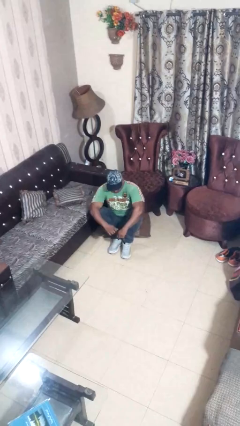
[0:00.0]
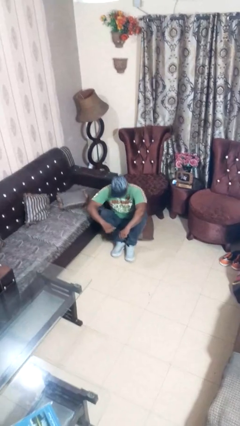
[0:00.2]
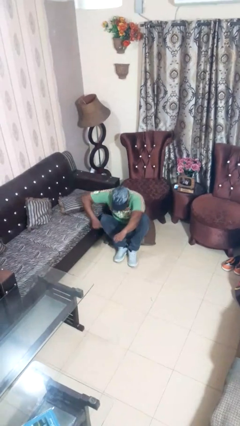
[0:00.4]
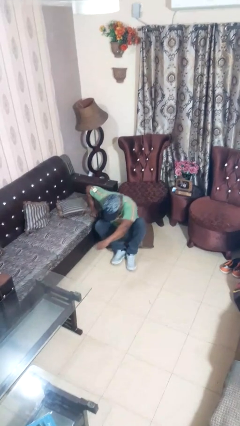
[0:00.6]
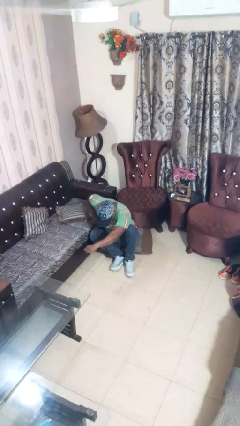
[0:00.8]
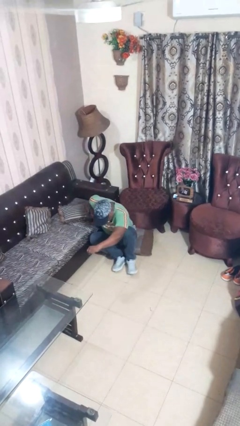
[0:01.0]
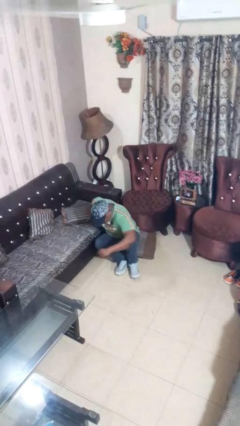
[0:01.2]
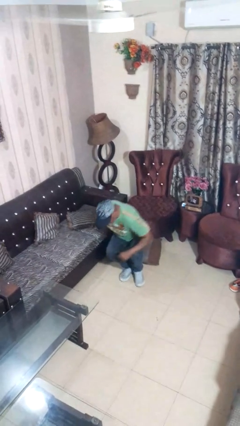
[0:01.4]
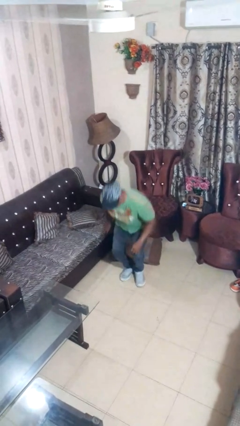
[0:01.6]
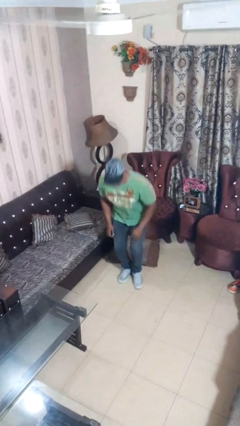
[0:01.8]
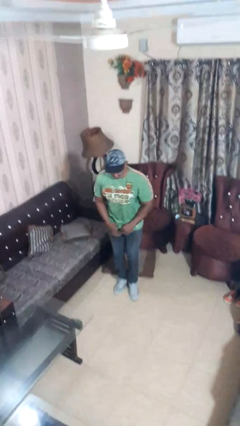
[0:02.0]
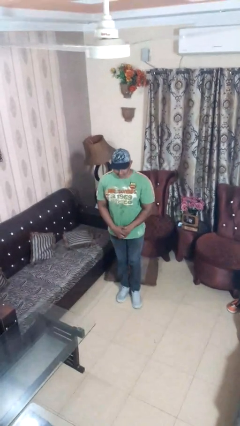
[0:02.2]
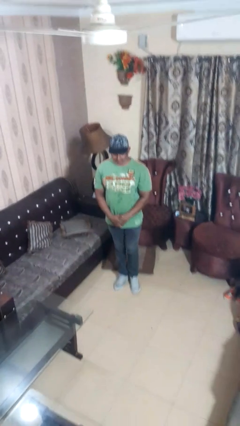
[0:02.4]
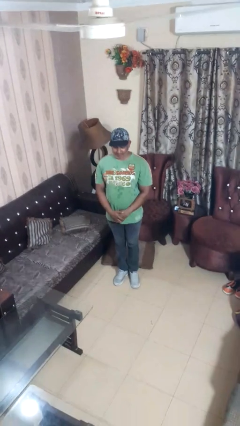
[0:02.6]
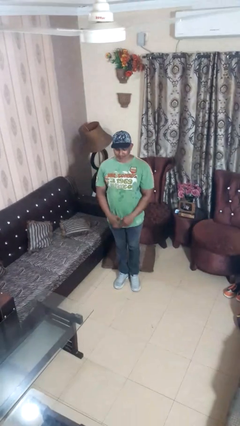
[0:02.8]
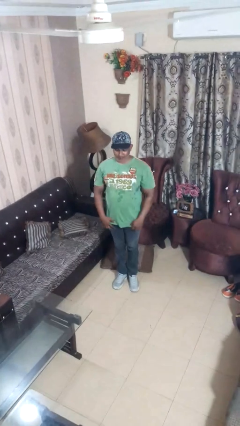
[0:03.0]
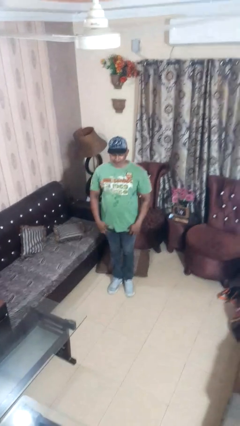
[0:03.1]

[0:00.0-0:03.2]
person stands up from floor

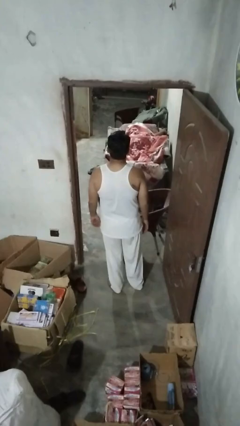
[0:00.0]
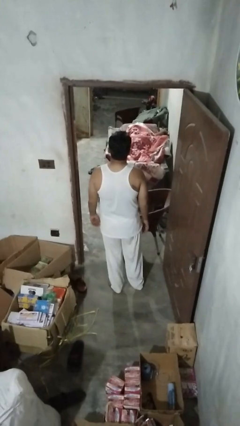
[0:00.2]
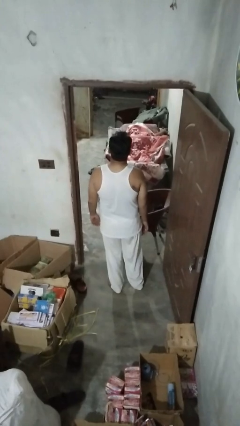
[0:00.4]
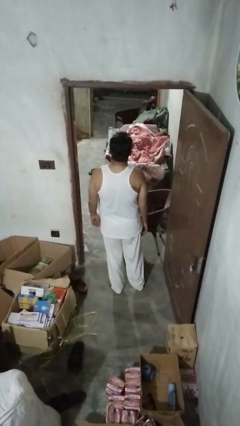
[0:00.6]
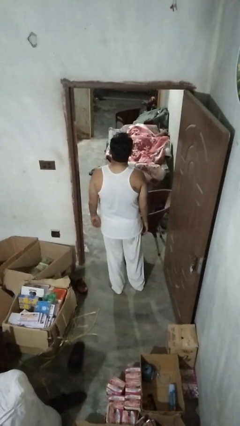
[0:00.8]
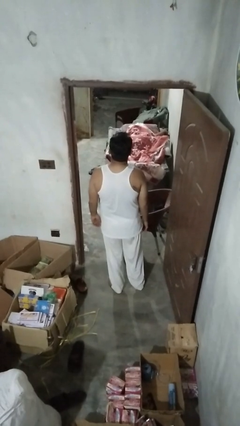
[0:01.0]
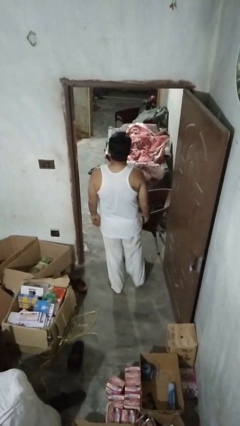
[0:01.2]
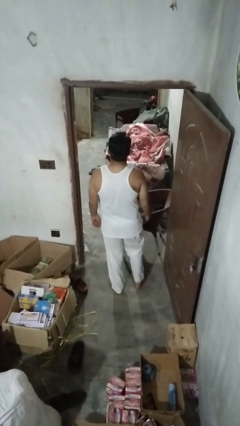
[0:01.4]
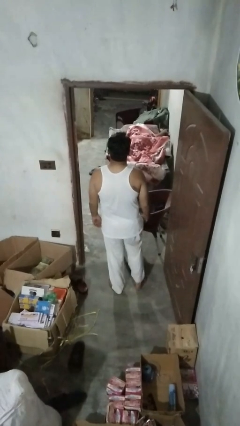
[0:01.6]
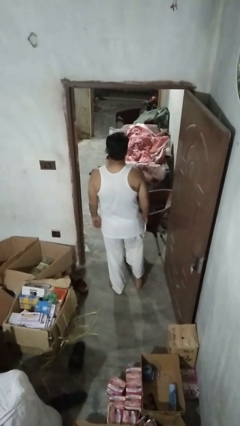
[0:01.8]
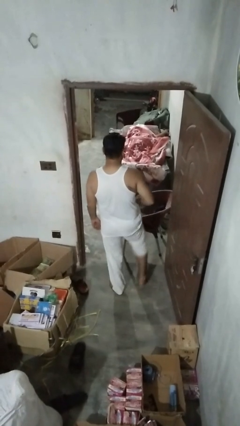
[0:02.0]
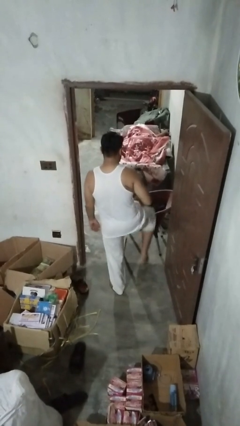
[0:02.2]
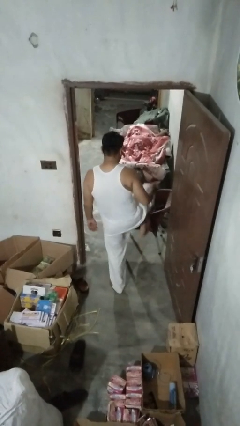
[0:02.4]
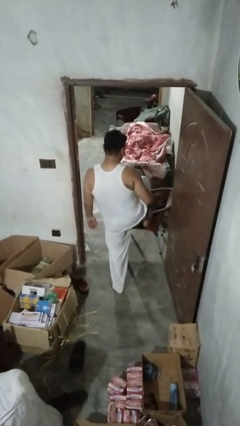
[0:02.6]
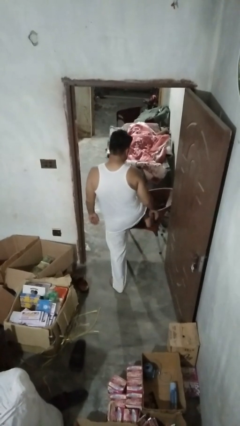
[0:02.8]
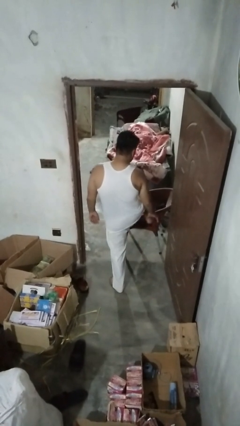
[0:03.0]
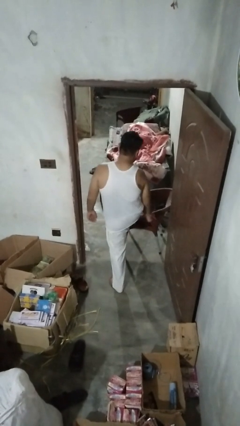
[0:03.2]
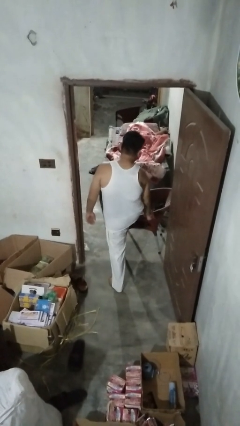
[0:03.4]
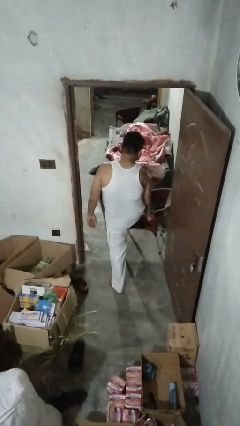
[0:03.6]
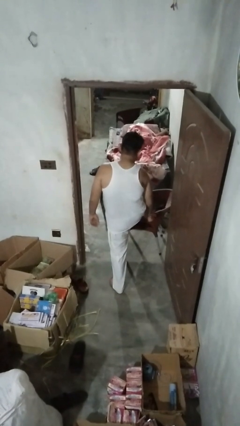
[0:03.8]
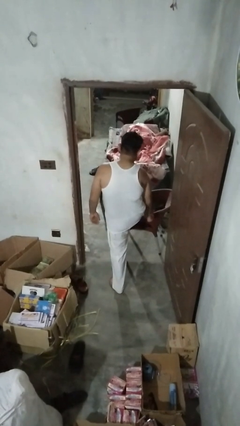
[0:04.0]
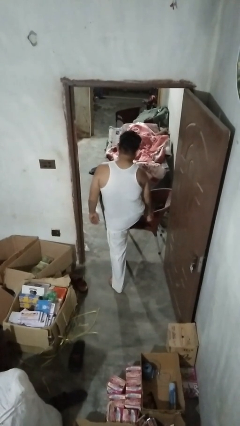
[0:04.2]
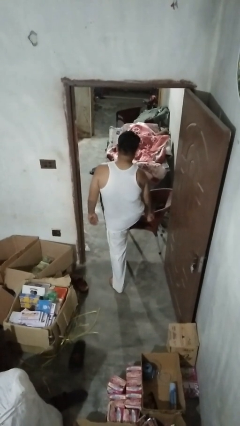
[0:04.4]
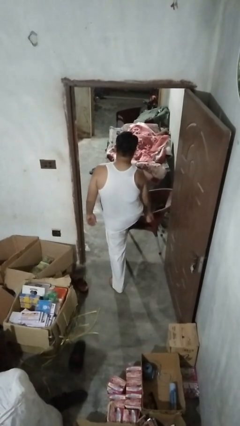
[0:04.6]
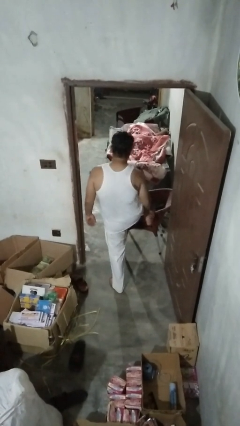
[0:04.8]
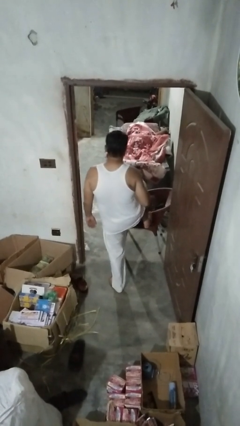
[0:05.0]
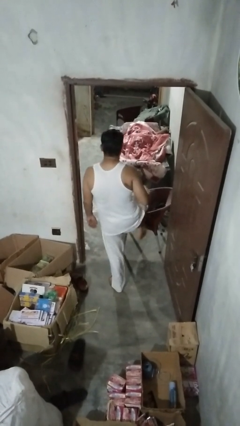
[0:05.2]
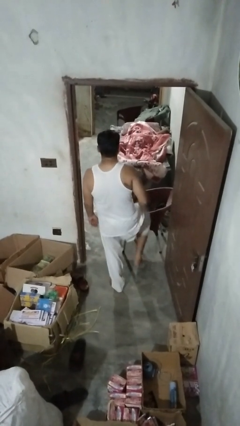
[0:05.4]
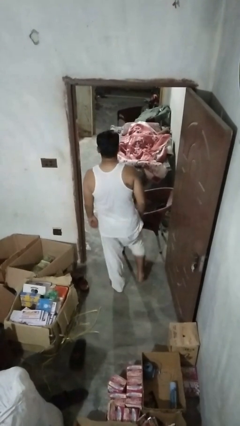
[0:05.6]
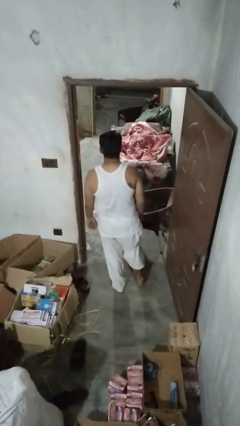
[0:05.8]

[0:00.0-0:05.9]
person stubs toe

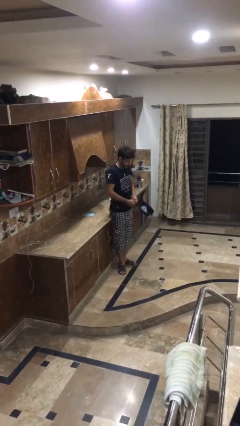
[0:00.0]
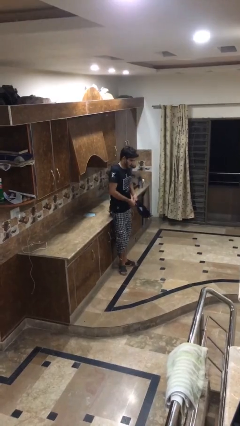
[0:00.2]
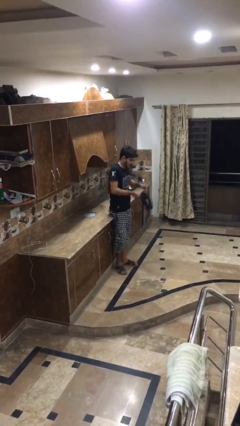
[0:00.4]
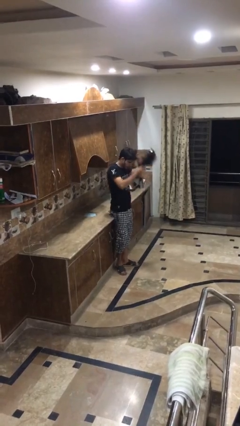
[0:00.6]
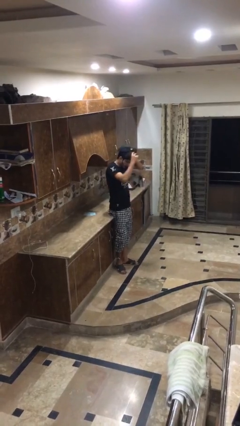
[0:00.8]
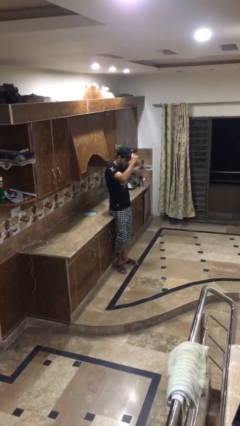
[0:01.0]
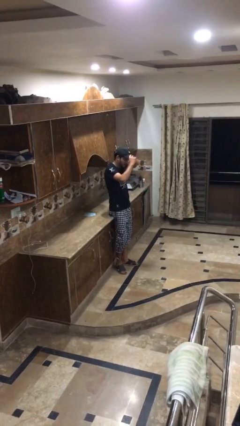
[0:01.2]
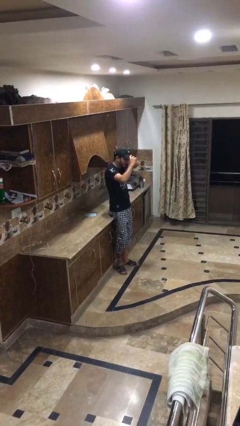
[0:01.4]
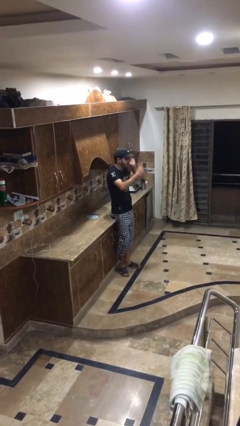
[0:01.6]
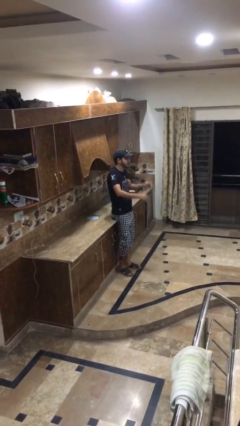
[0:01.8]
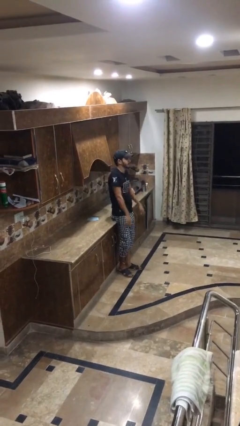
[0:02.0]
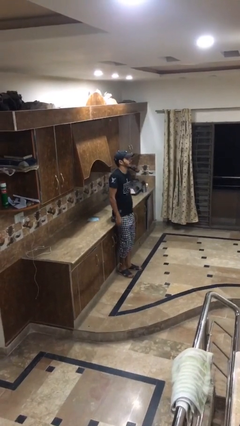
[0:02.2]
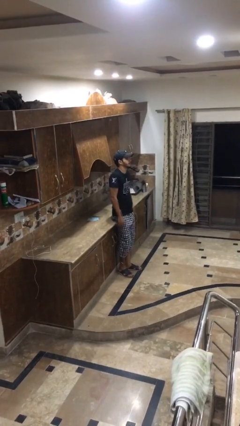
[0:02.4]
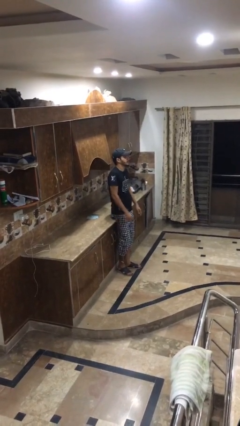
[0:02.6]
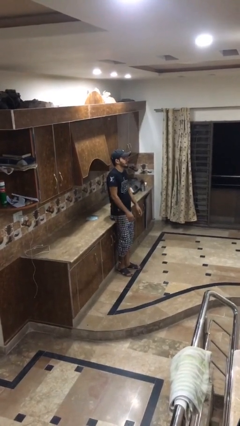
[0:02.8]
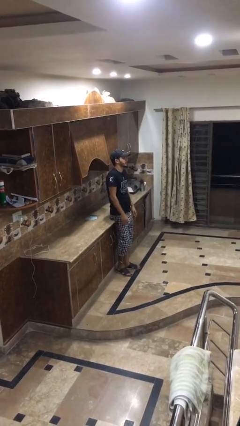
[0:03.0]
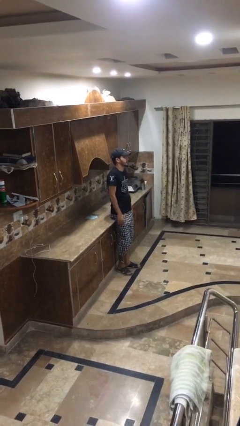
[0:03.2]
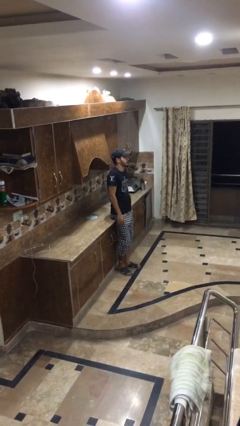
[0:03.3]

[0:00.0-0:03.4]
person puts on hat

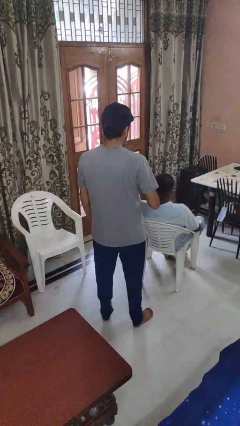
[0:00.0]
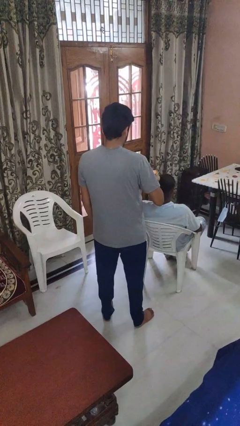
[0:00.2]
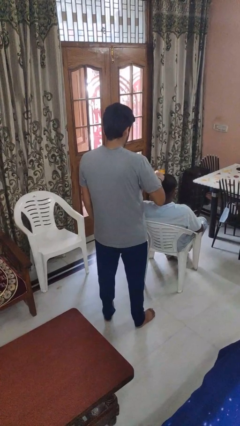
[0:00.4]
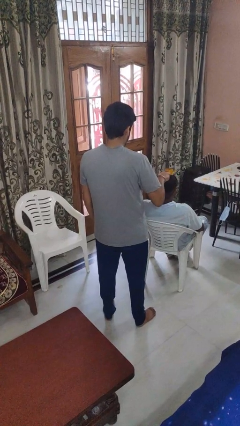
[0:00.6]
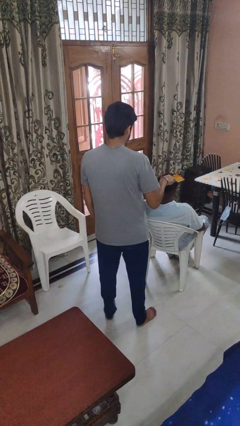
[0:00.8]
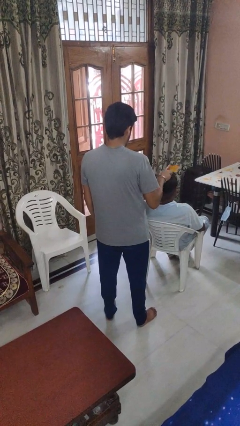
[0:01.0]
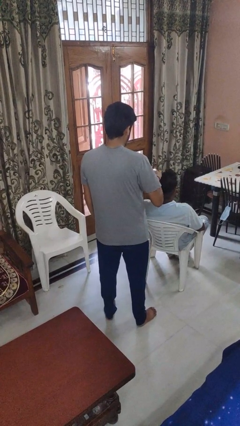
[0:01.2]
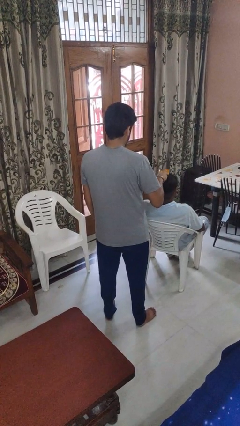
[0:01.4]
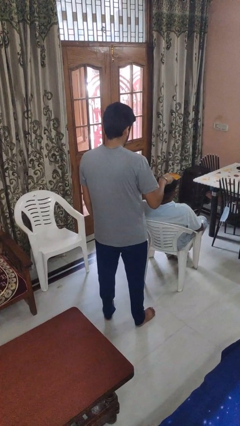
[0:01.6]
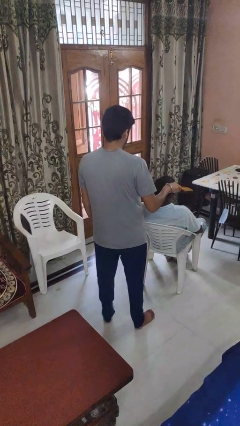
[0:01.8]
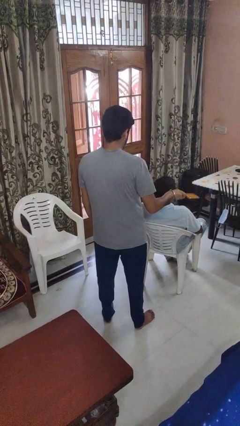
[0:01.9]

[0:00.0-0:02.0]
person brushes hair of person

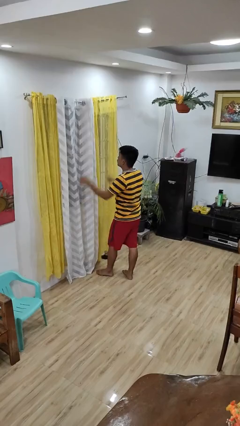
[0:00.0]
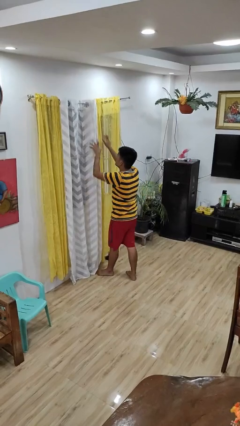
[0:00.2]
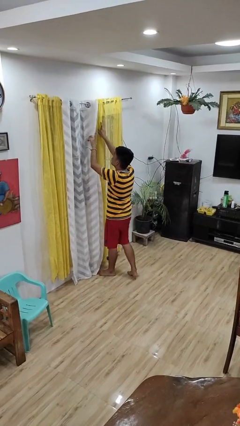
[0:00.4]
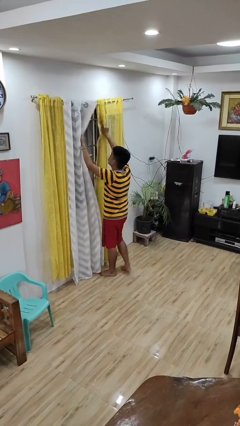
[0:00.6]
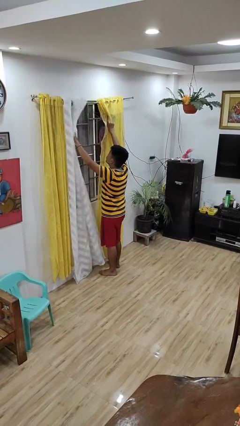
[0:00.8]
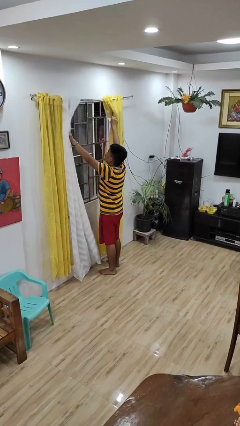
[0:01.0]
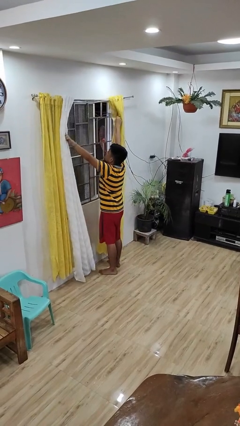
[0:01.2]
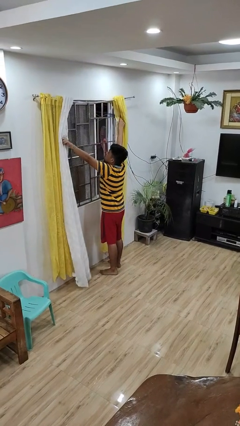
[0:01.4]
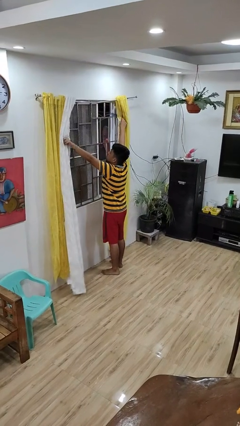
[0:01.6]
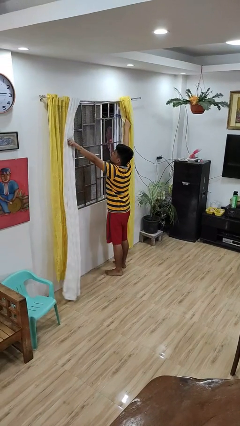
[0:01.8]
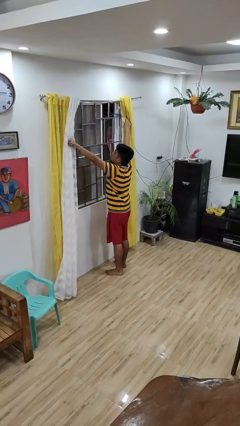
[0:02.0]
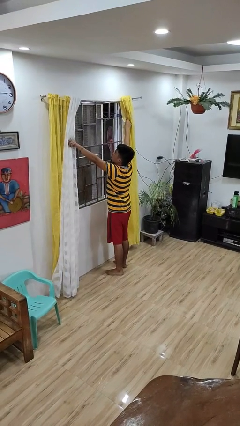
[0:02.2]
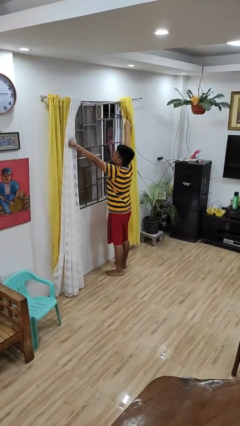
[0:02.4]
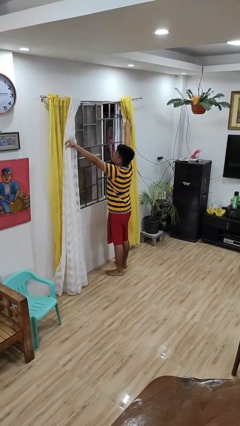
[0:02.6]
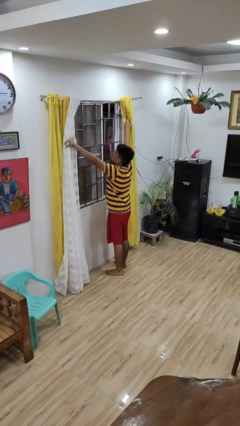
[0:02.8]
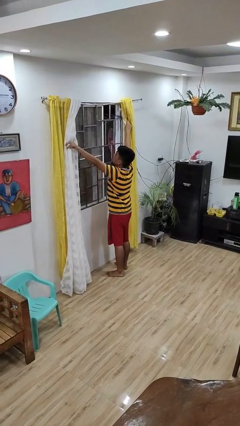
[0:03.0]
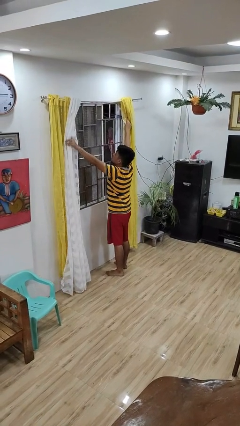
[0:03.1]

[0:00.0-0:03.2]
person opens curtains

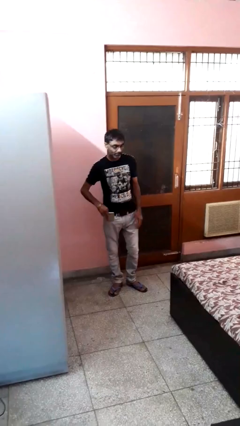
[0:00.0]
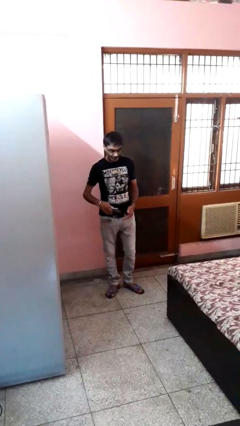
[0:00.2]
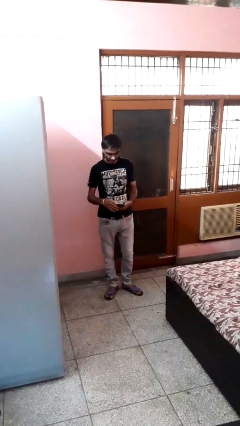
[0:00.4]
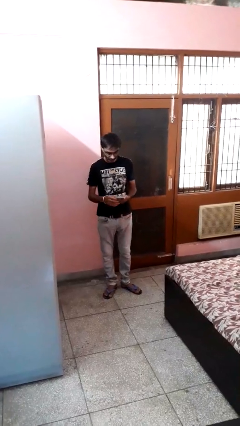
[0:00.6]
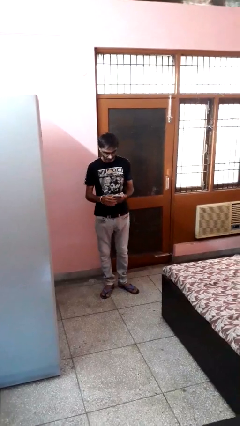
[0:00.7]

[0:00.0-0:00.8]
person takes phone from pocket
